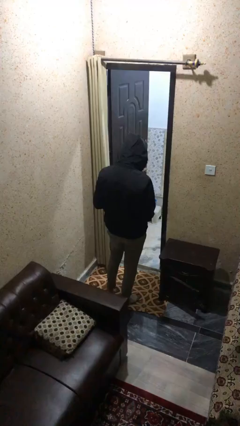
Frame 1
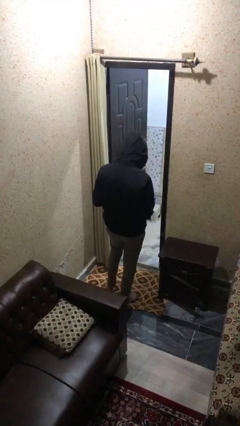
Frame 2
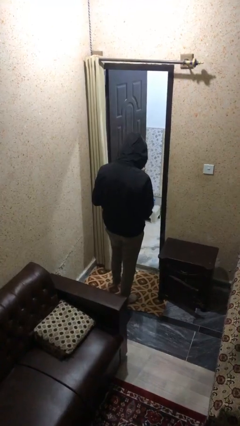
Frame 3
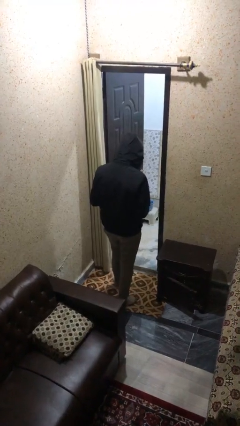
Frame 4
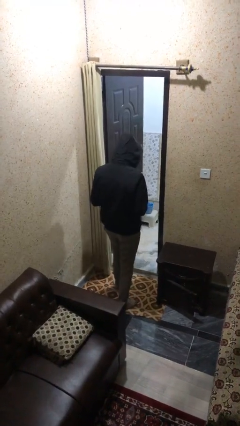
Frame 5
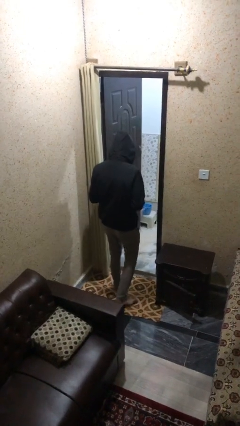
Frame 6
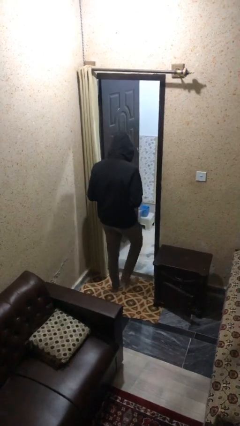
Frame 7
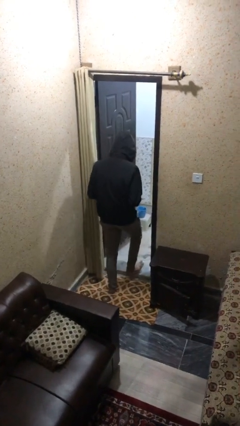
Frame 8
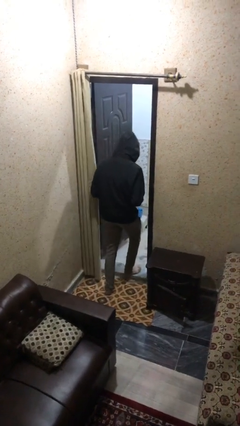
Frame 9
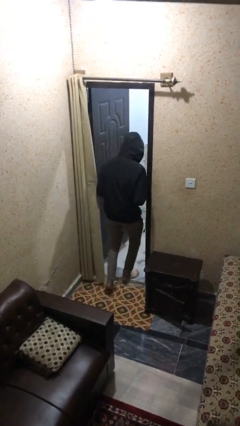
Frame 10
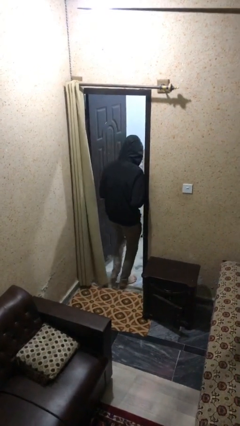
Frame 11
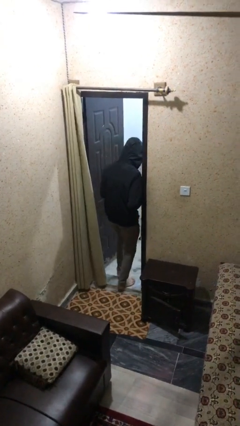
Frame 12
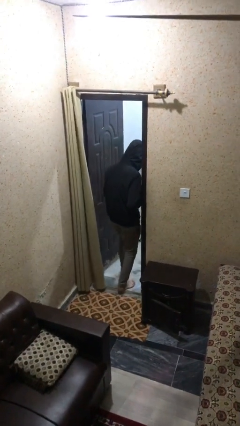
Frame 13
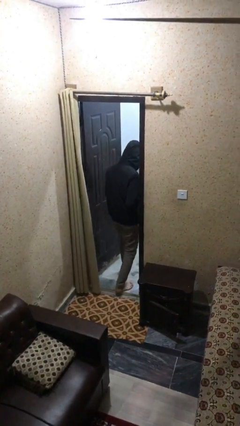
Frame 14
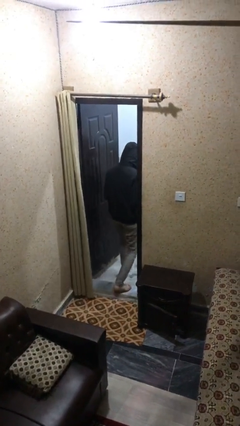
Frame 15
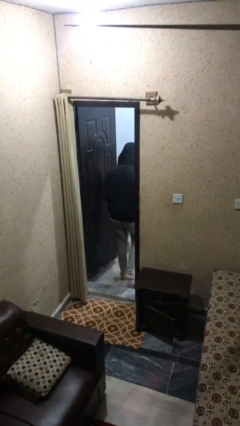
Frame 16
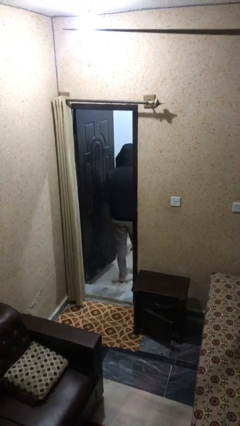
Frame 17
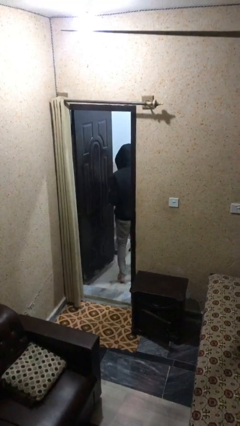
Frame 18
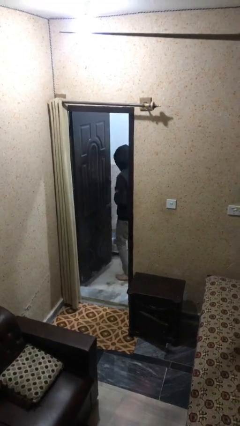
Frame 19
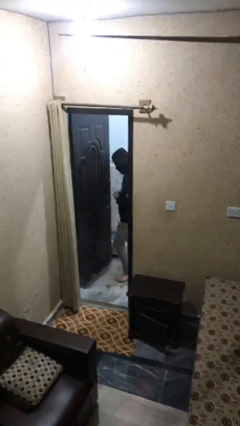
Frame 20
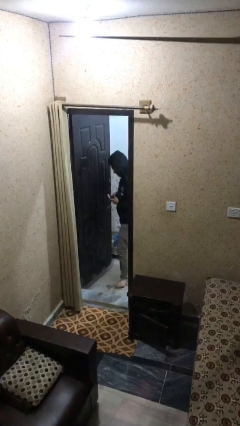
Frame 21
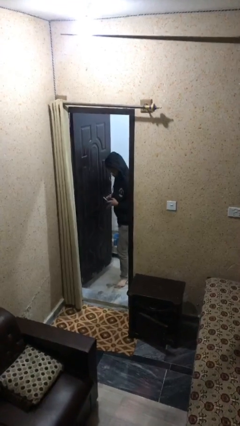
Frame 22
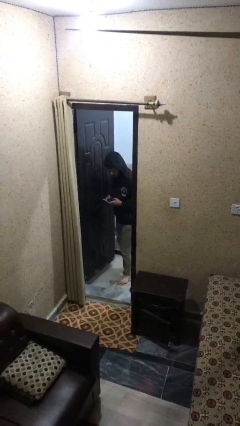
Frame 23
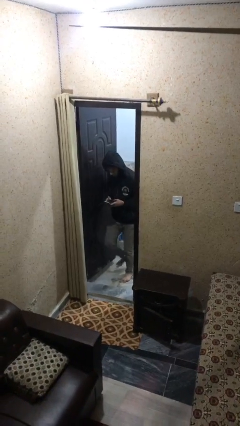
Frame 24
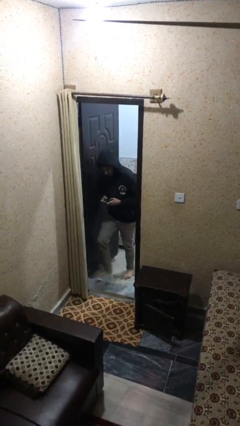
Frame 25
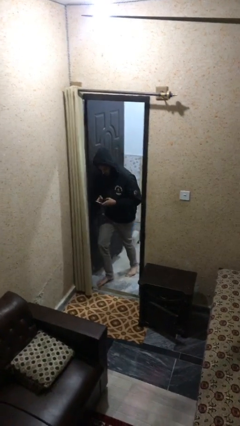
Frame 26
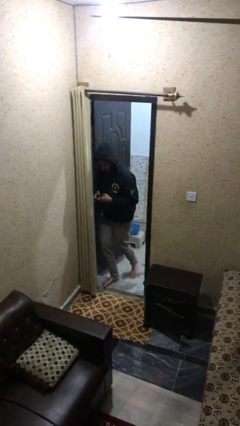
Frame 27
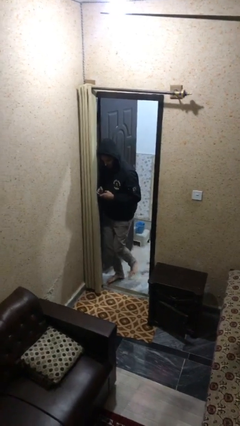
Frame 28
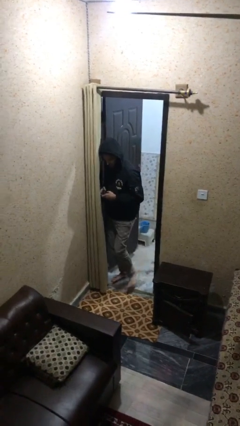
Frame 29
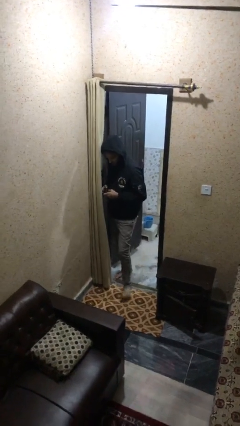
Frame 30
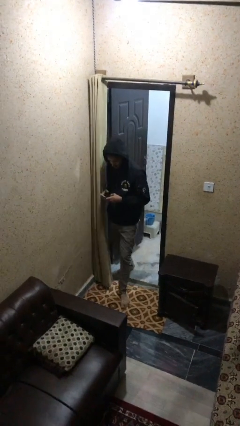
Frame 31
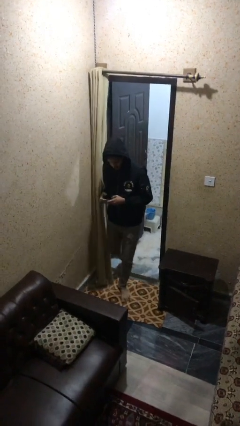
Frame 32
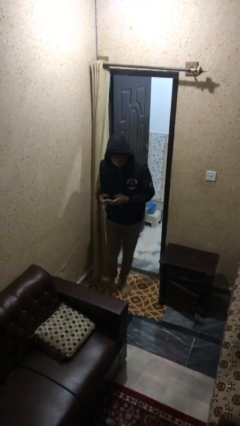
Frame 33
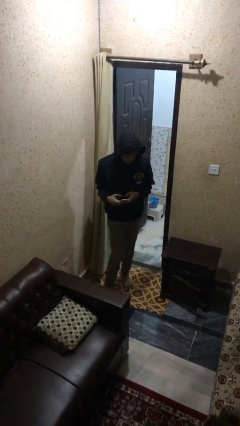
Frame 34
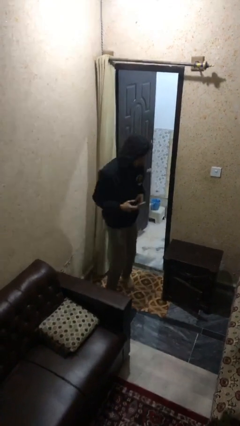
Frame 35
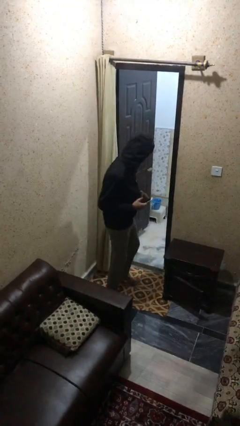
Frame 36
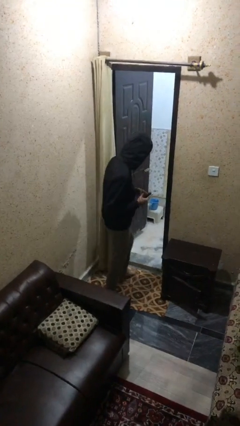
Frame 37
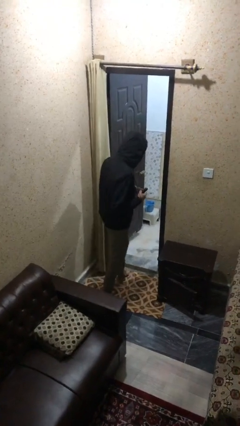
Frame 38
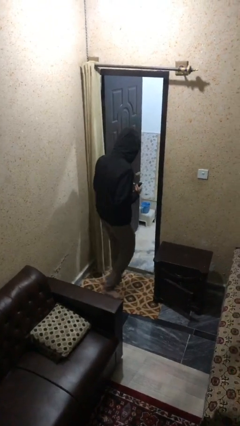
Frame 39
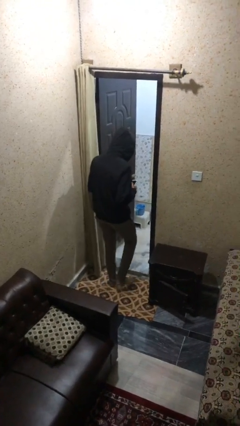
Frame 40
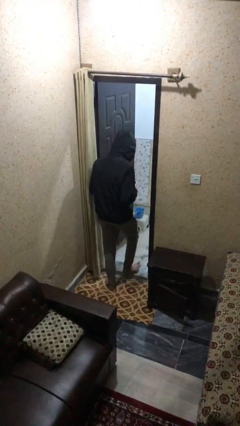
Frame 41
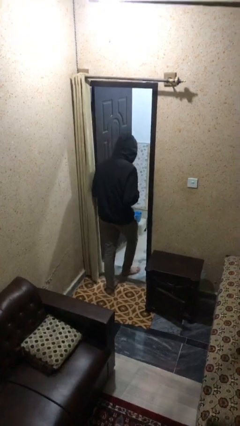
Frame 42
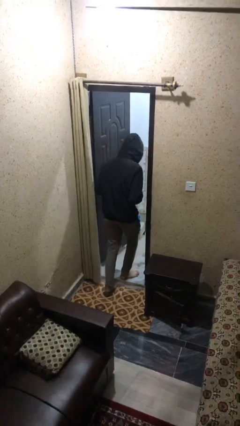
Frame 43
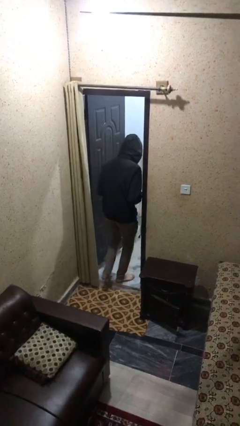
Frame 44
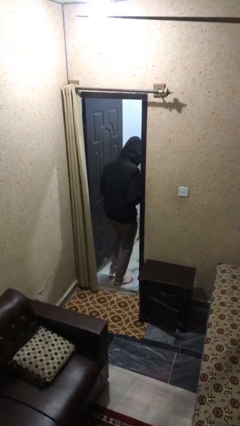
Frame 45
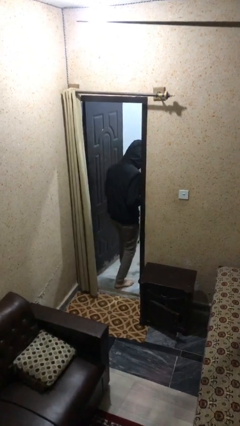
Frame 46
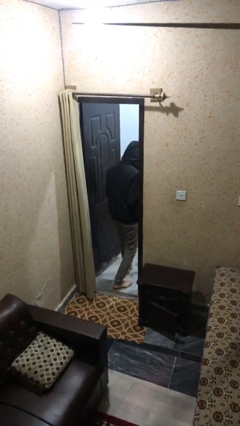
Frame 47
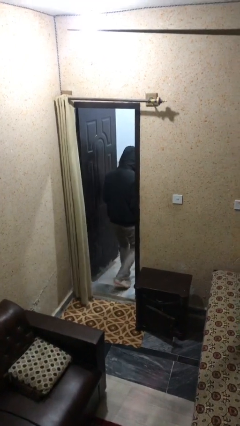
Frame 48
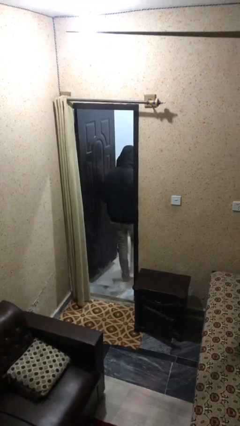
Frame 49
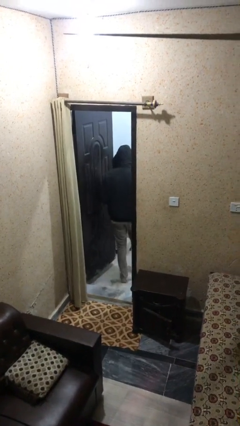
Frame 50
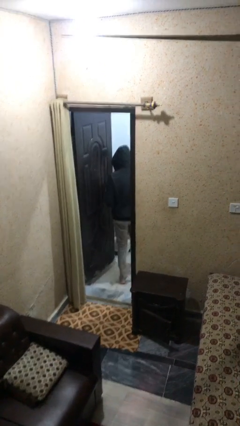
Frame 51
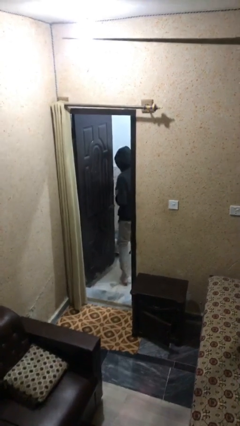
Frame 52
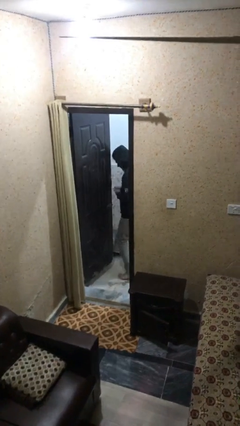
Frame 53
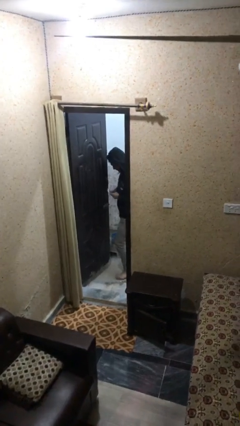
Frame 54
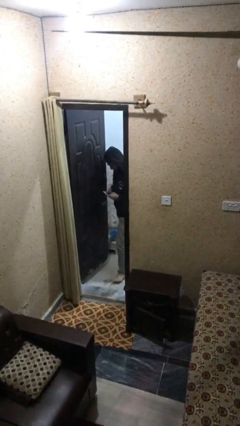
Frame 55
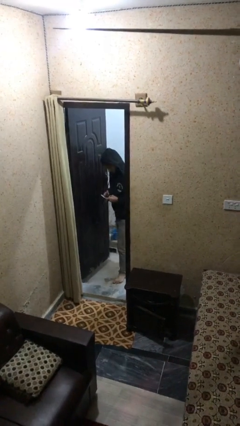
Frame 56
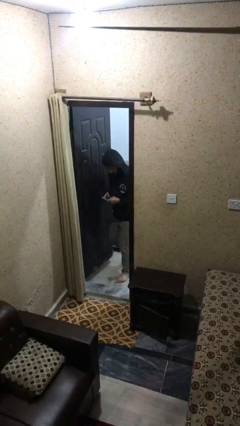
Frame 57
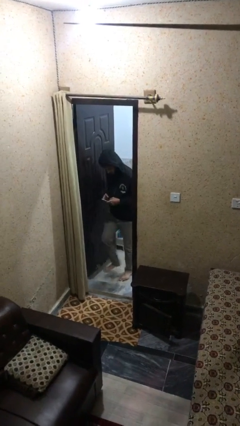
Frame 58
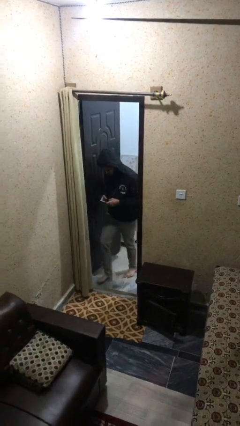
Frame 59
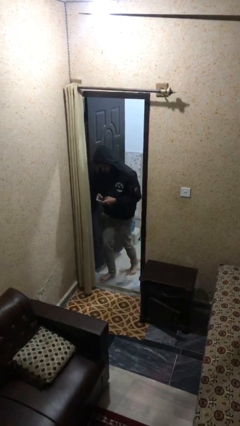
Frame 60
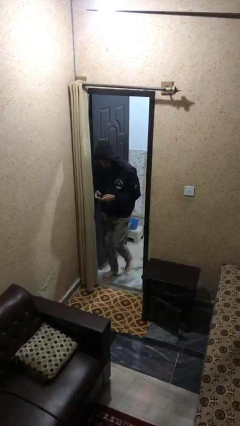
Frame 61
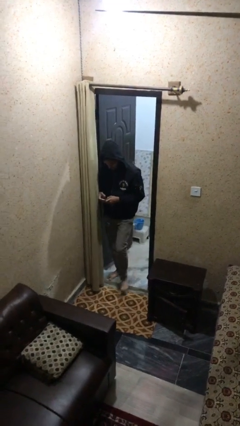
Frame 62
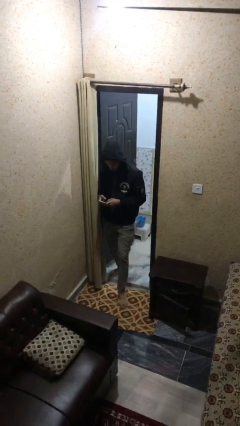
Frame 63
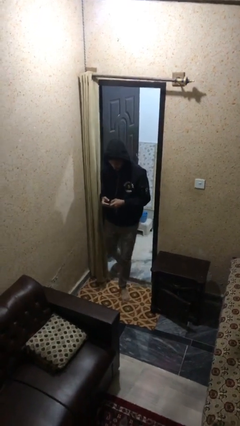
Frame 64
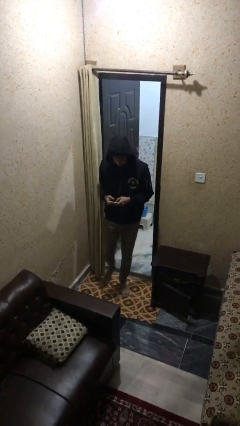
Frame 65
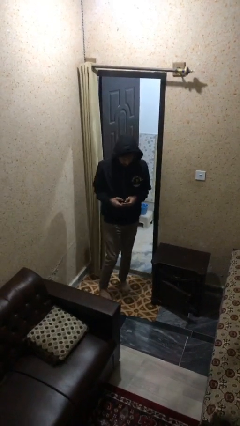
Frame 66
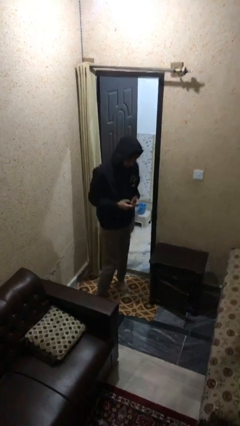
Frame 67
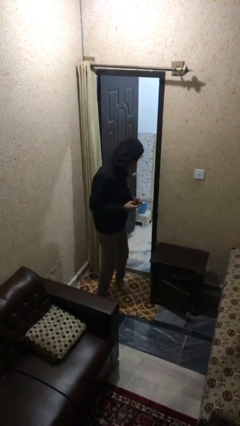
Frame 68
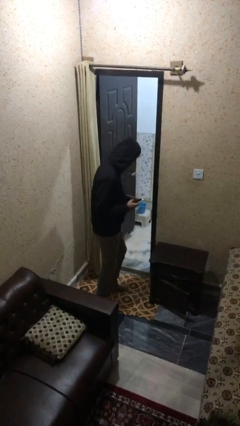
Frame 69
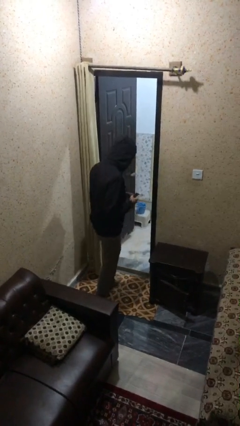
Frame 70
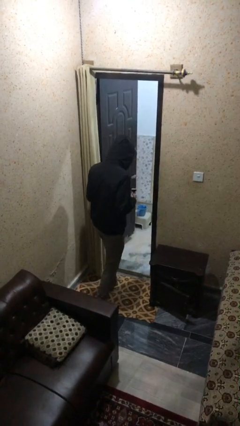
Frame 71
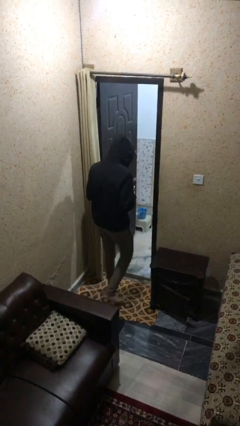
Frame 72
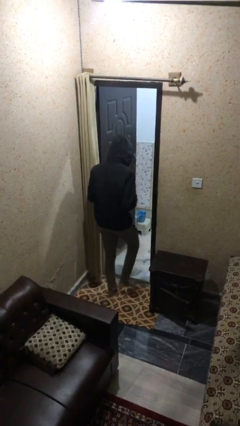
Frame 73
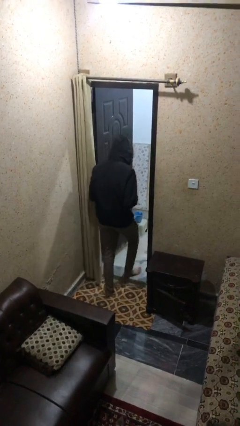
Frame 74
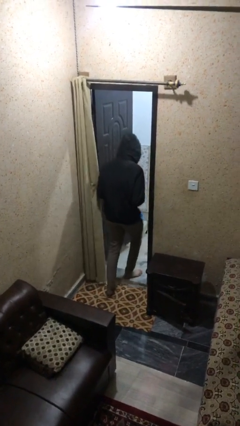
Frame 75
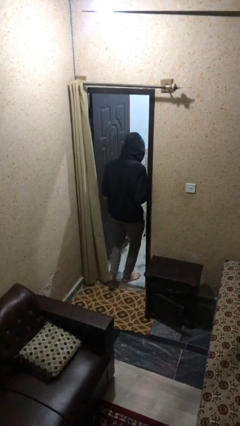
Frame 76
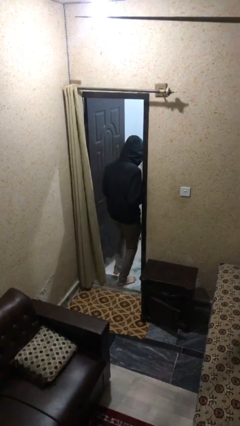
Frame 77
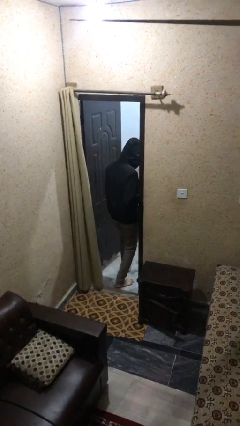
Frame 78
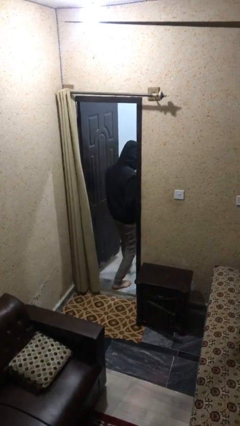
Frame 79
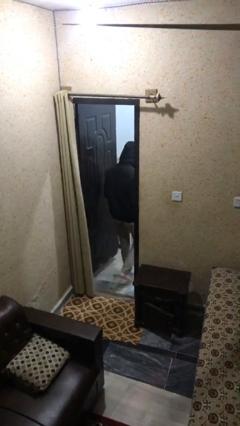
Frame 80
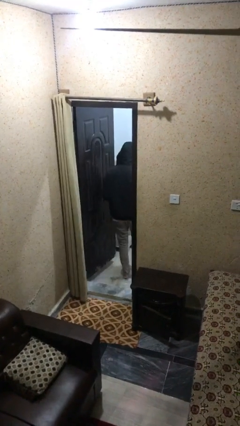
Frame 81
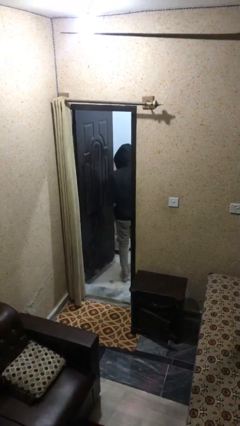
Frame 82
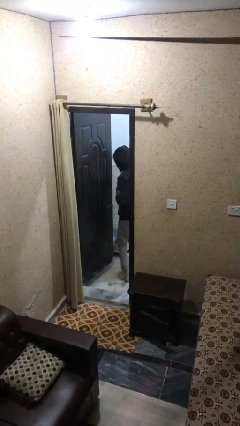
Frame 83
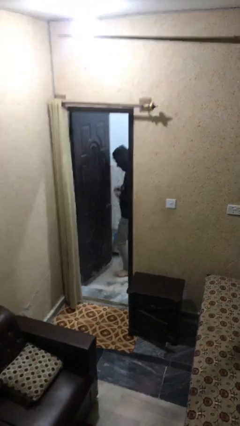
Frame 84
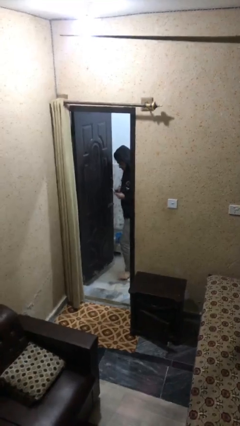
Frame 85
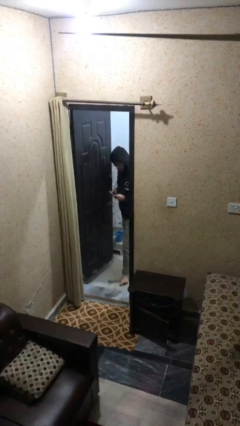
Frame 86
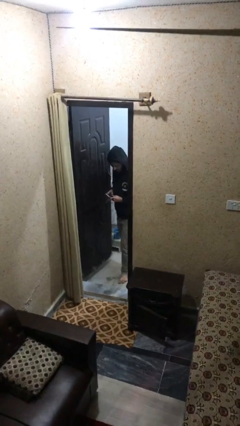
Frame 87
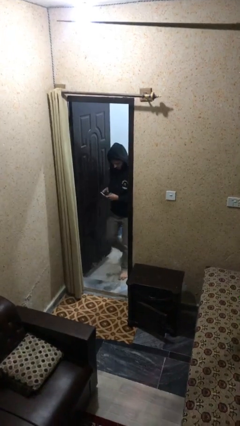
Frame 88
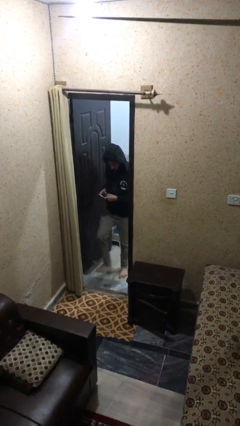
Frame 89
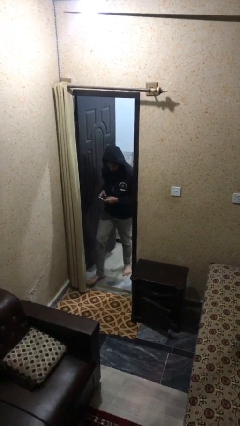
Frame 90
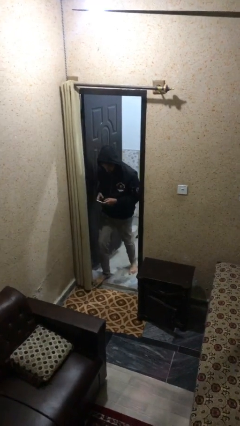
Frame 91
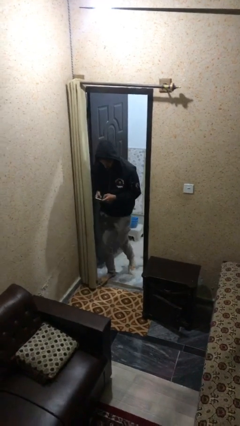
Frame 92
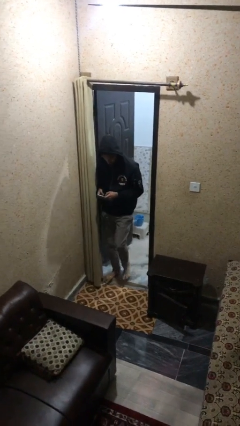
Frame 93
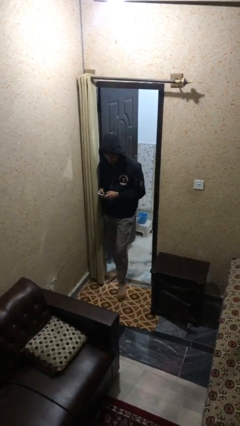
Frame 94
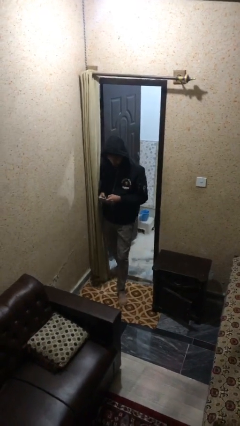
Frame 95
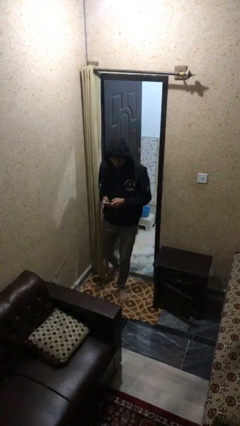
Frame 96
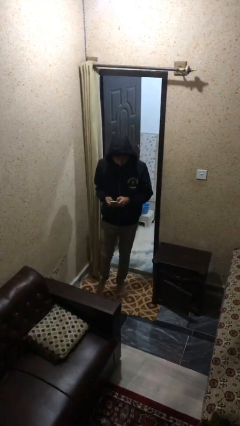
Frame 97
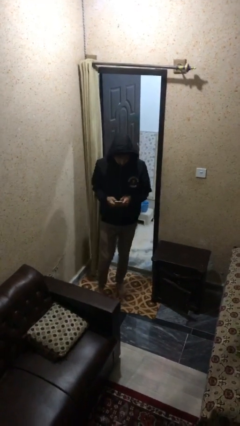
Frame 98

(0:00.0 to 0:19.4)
person texts on phone
